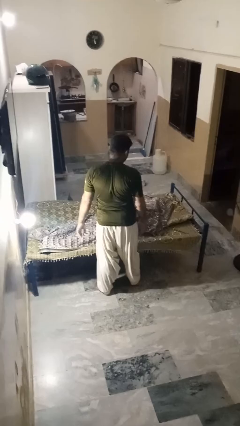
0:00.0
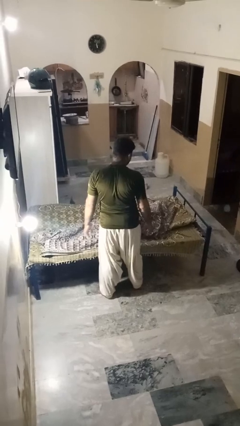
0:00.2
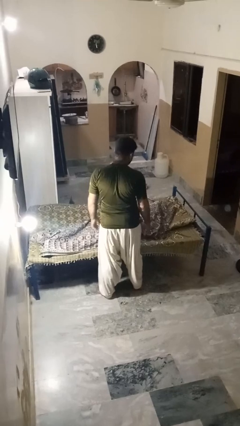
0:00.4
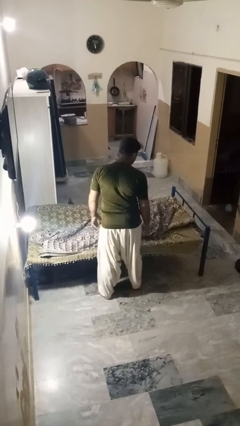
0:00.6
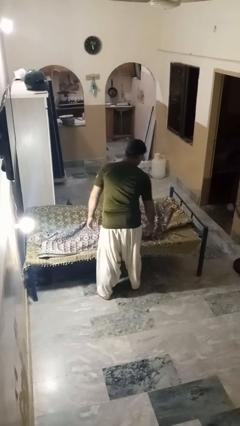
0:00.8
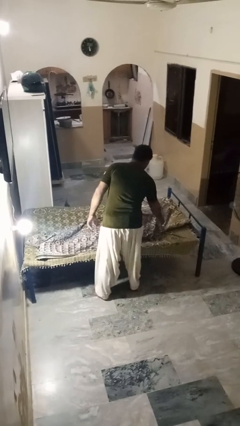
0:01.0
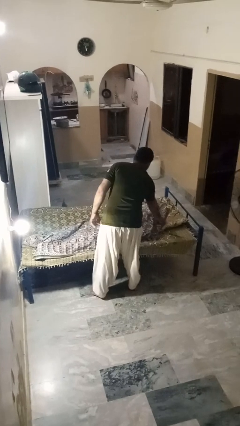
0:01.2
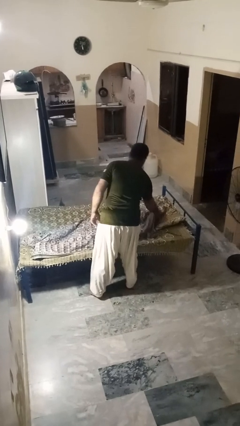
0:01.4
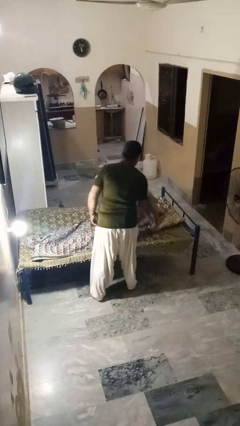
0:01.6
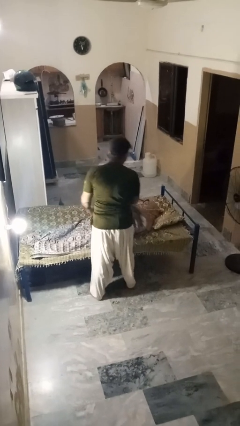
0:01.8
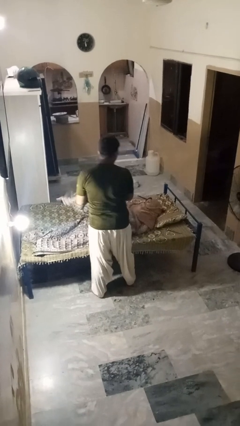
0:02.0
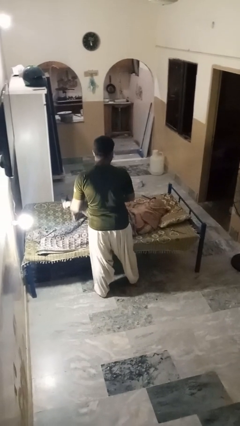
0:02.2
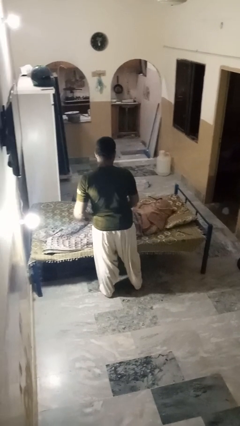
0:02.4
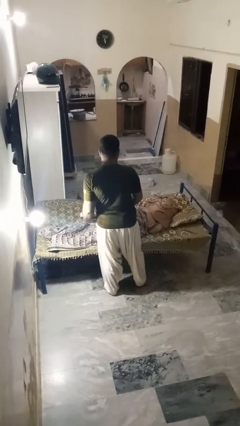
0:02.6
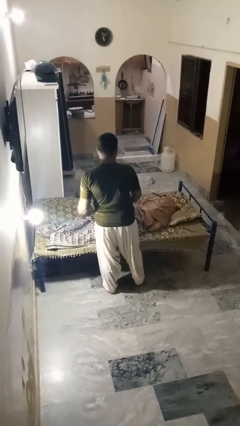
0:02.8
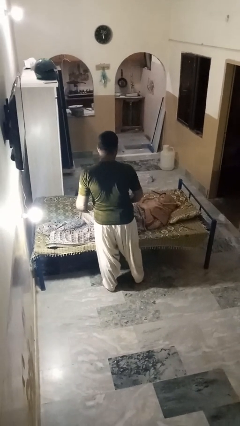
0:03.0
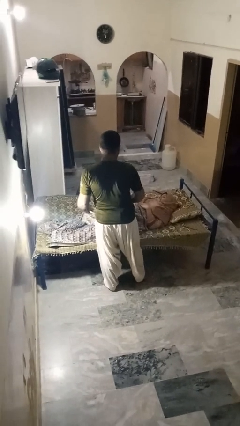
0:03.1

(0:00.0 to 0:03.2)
person uncovers friend with blanket

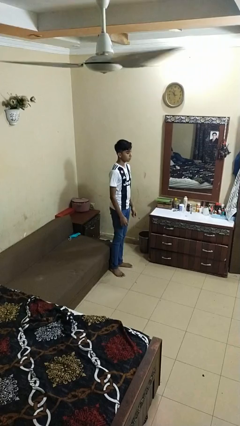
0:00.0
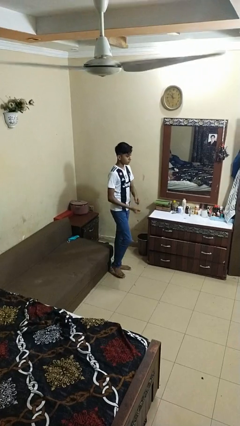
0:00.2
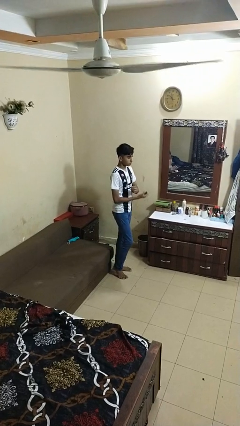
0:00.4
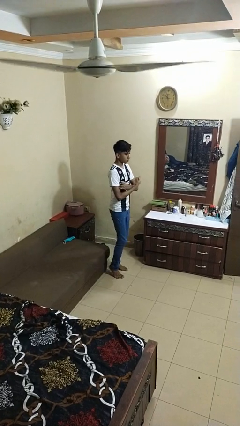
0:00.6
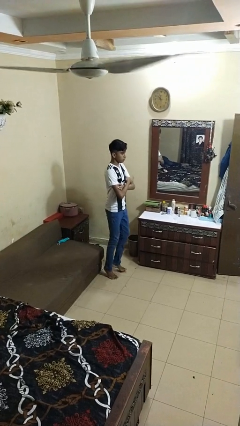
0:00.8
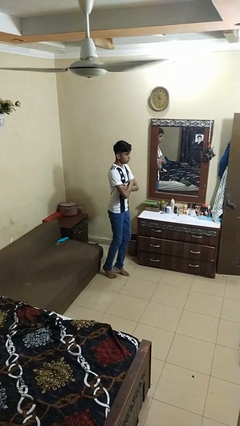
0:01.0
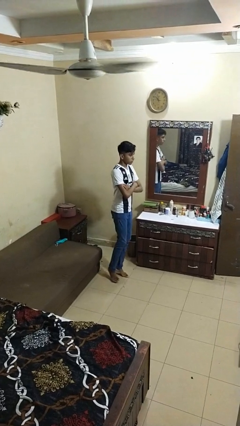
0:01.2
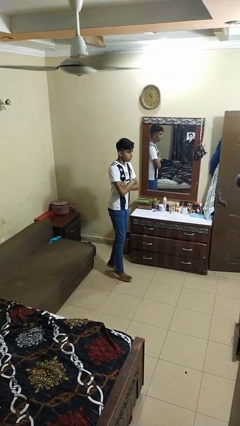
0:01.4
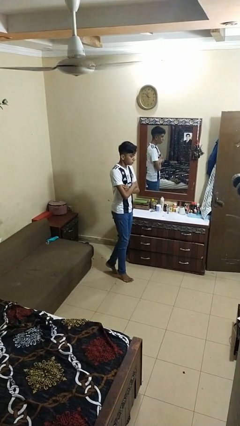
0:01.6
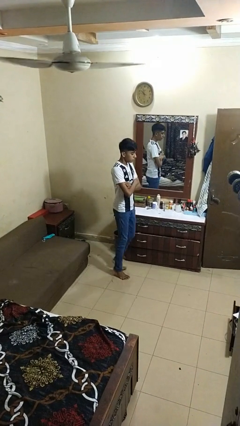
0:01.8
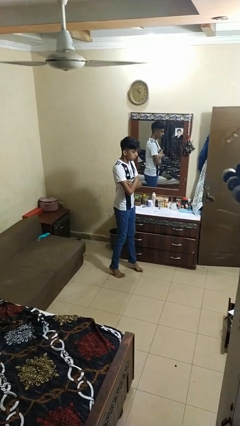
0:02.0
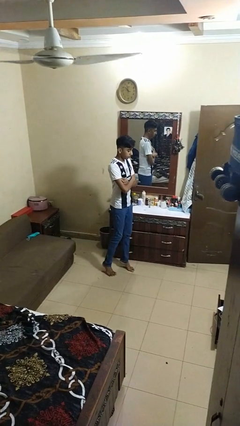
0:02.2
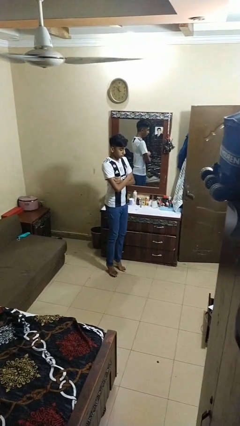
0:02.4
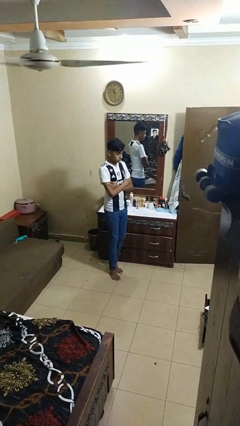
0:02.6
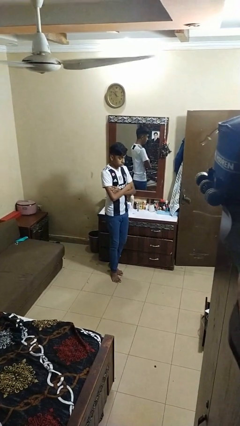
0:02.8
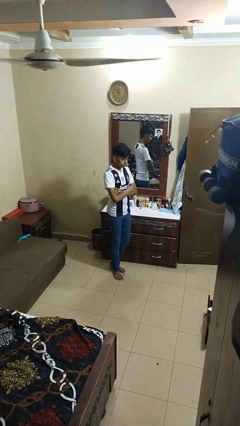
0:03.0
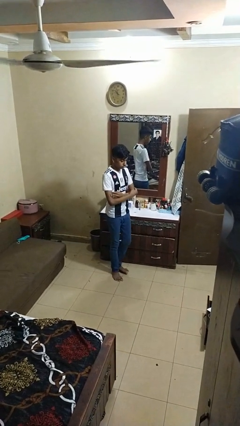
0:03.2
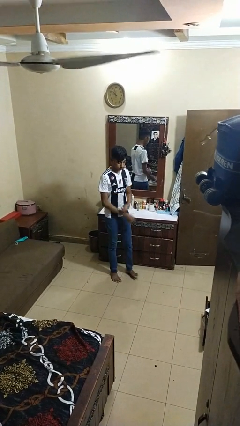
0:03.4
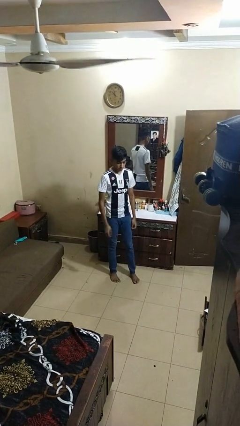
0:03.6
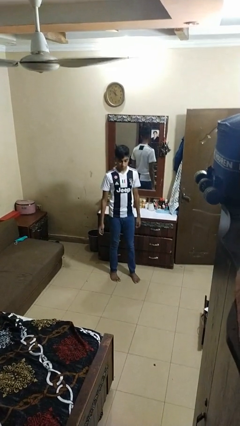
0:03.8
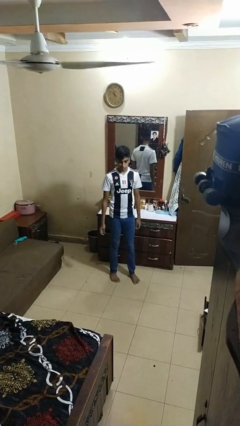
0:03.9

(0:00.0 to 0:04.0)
person walks tiptoe

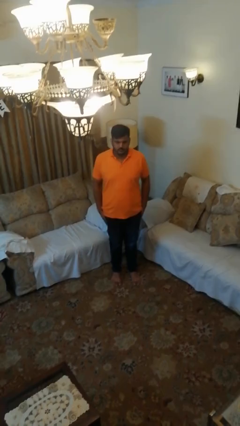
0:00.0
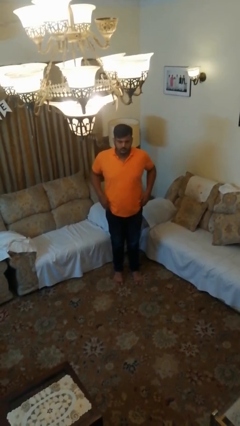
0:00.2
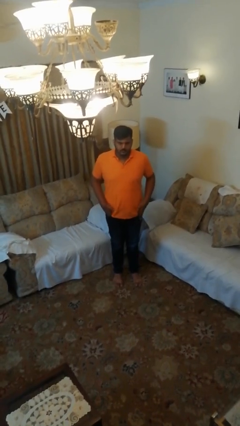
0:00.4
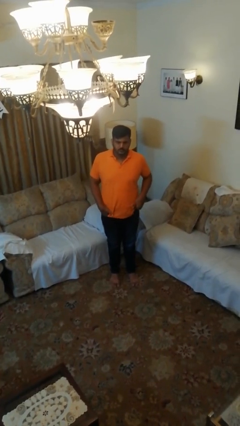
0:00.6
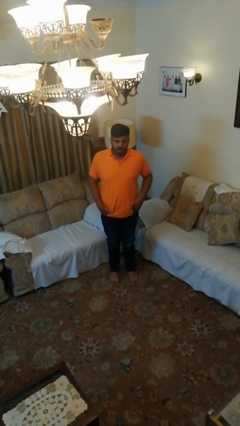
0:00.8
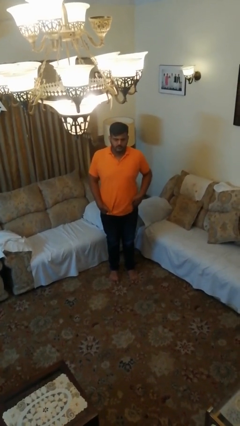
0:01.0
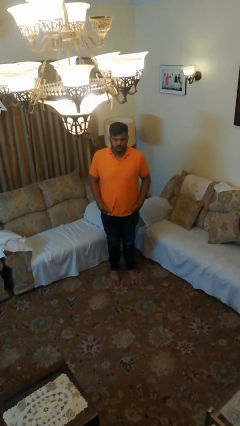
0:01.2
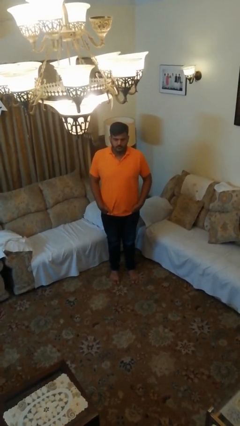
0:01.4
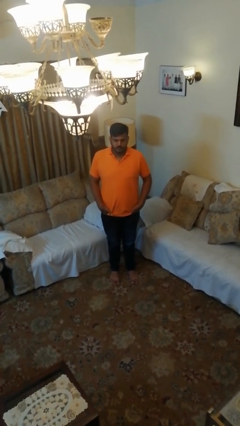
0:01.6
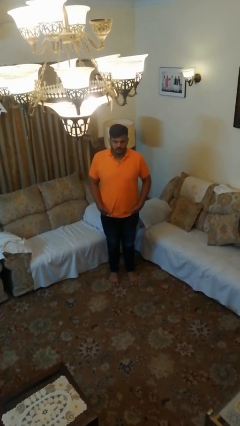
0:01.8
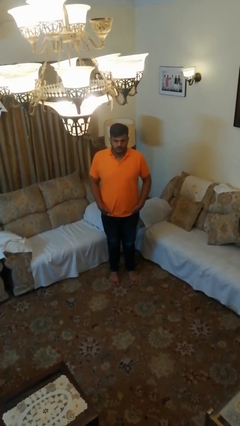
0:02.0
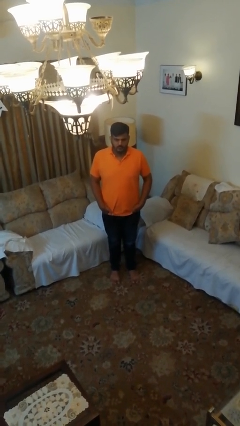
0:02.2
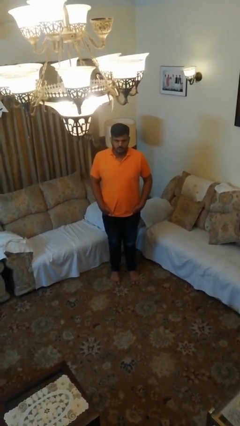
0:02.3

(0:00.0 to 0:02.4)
person puts hands in back pockets

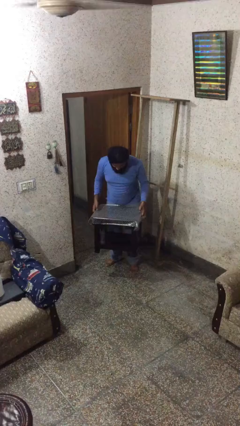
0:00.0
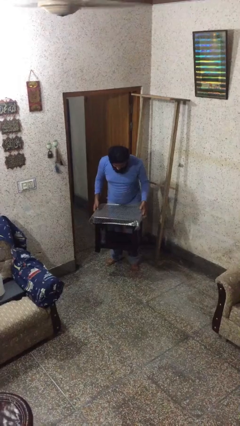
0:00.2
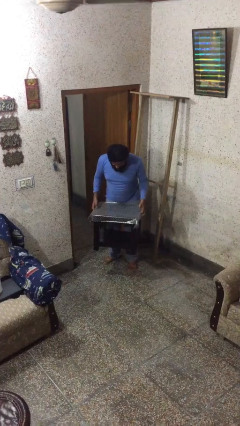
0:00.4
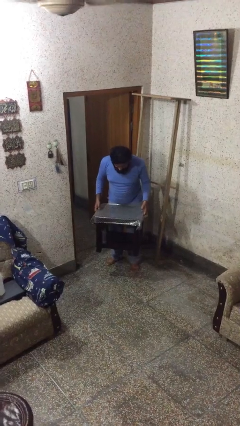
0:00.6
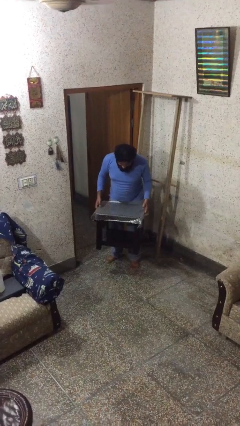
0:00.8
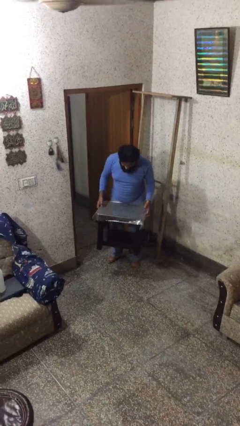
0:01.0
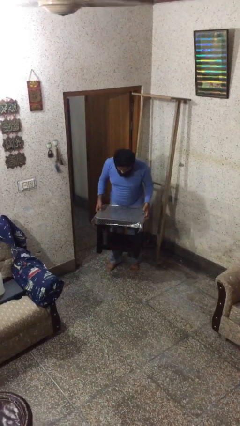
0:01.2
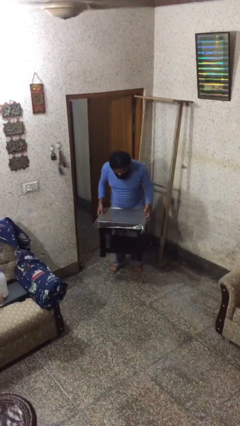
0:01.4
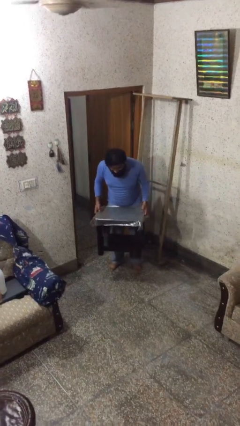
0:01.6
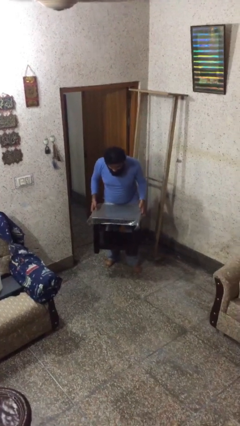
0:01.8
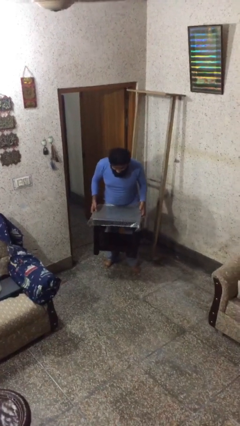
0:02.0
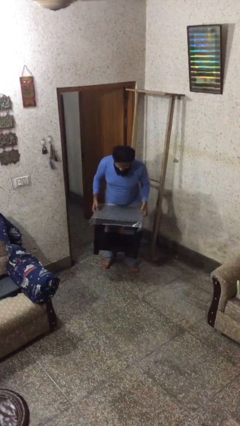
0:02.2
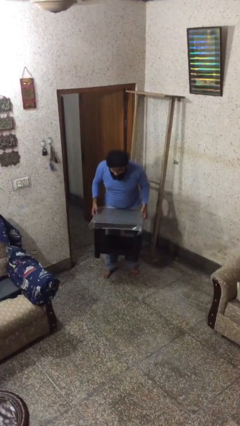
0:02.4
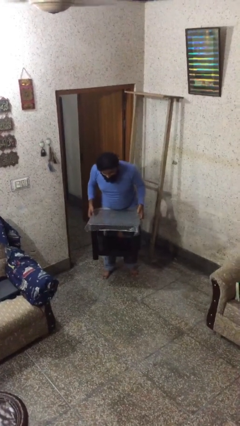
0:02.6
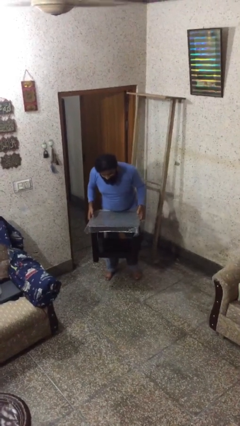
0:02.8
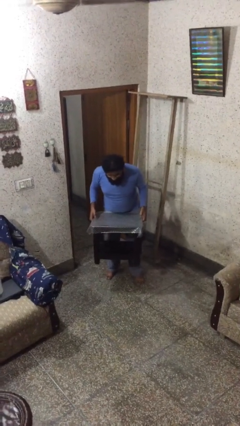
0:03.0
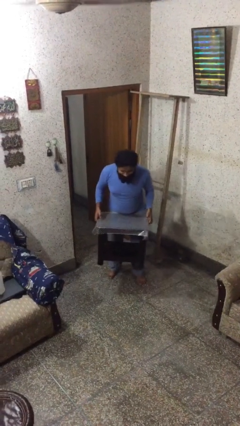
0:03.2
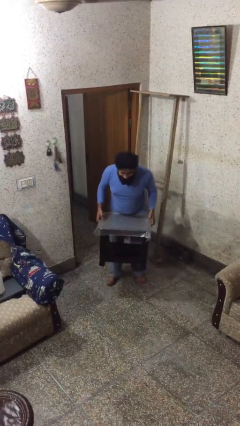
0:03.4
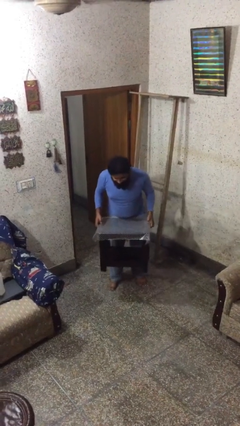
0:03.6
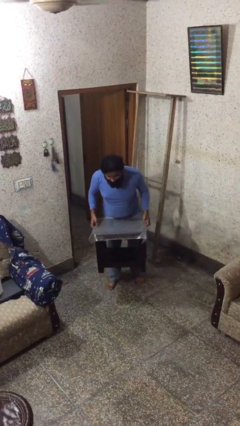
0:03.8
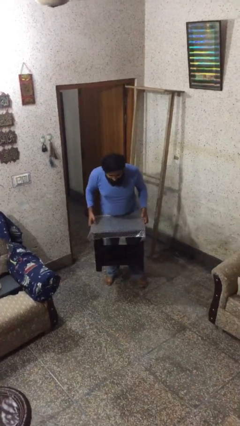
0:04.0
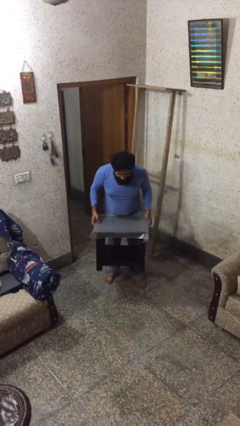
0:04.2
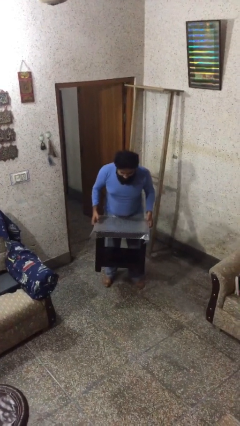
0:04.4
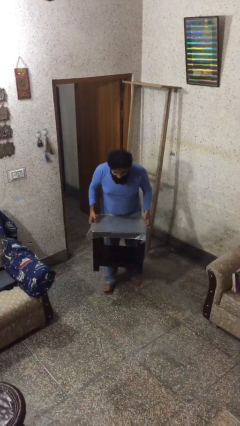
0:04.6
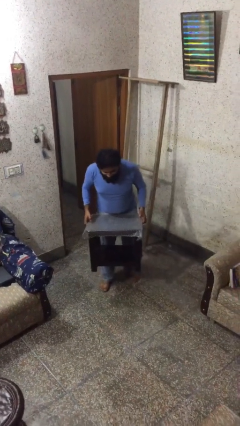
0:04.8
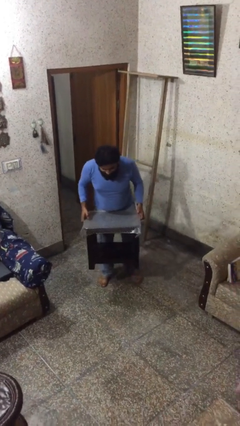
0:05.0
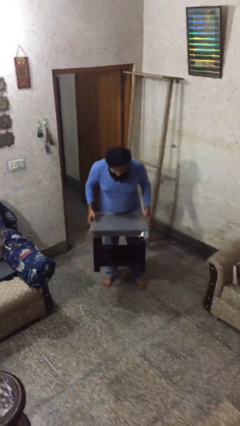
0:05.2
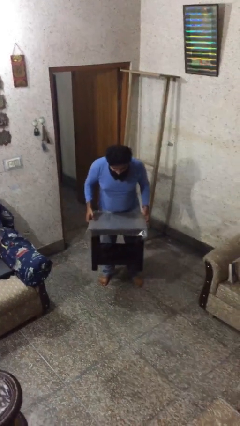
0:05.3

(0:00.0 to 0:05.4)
person carries heavy object

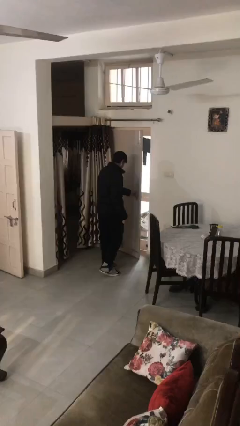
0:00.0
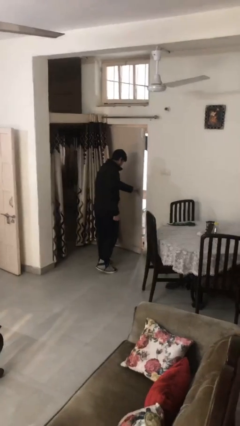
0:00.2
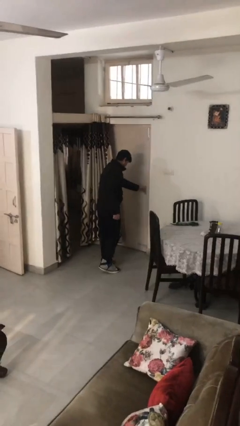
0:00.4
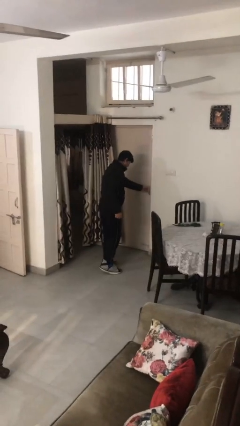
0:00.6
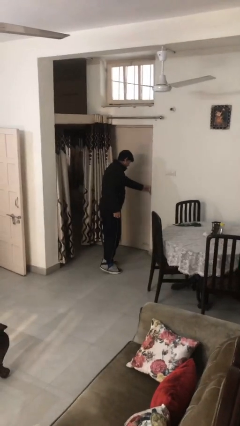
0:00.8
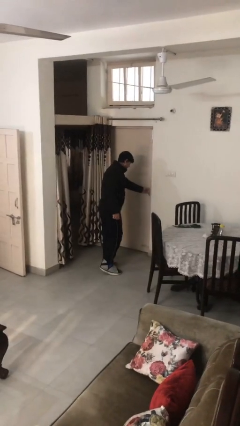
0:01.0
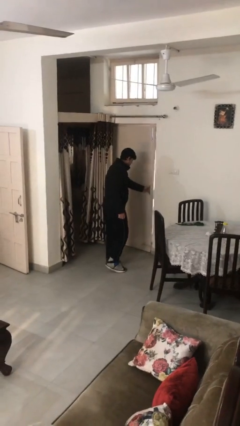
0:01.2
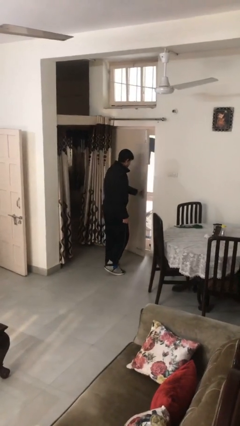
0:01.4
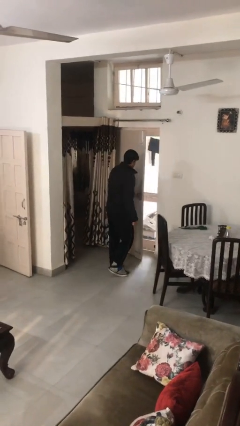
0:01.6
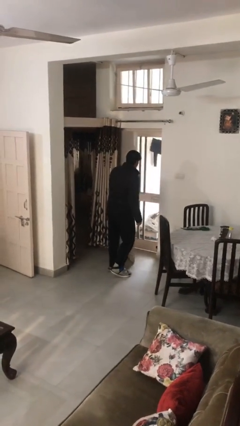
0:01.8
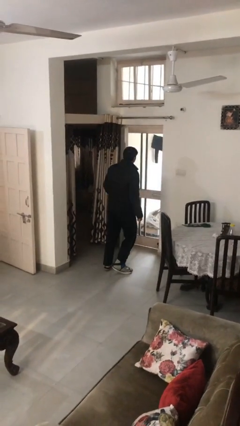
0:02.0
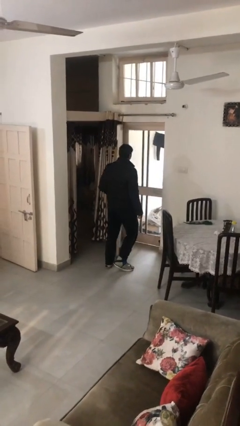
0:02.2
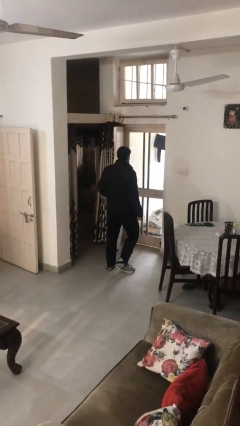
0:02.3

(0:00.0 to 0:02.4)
person opens facility door

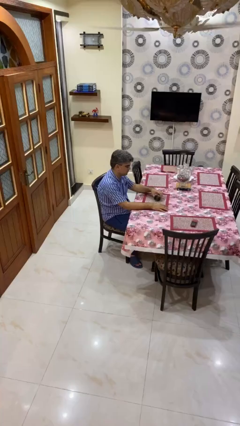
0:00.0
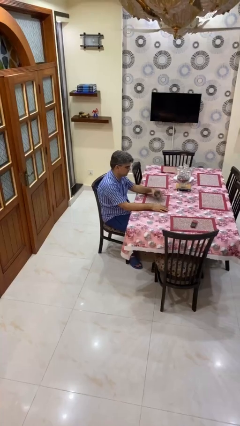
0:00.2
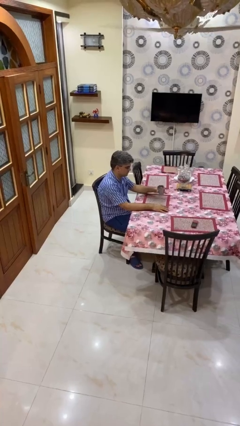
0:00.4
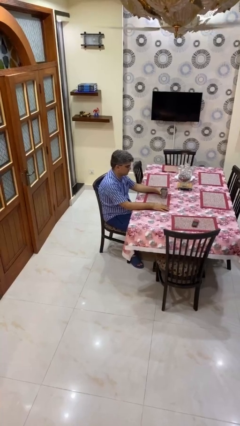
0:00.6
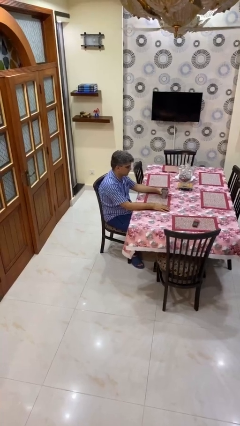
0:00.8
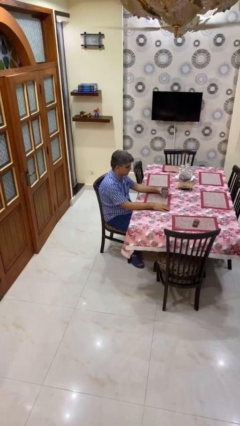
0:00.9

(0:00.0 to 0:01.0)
person sets upright glass
